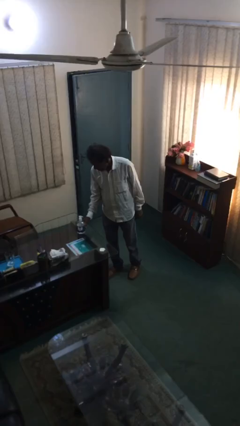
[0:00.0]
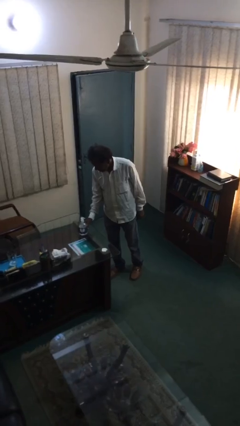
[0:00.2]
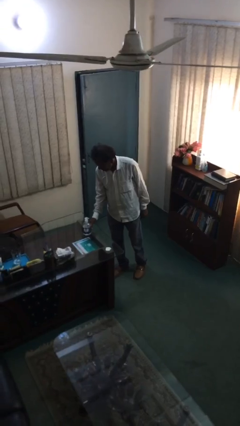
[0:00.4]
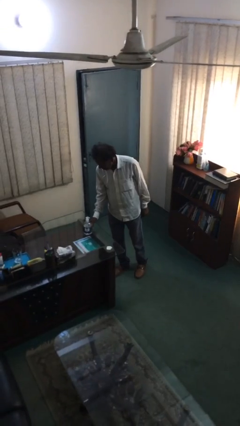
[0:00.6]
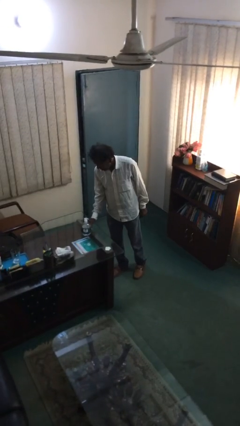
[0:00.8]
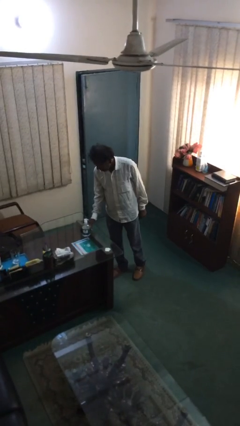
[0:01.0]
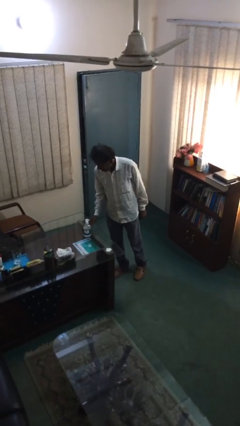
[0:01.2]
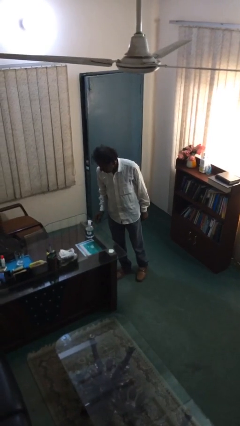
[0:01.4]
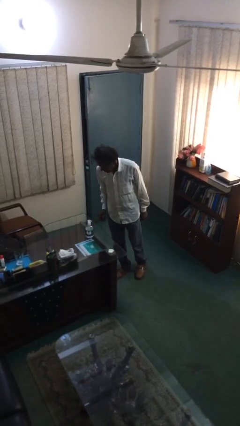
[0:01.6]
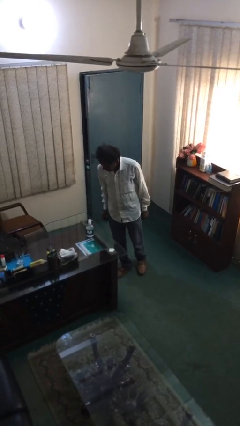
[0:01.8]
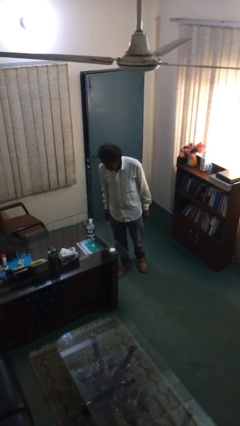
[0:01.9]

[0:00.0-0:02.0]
person puts down object on table

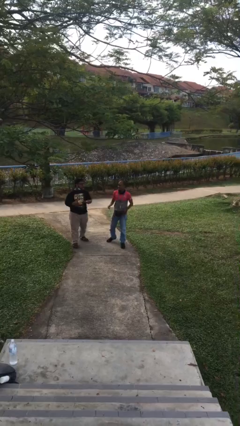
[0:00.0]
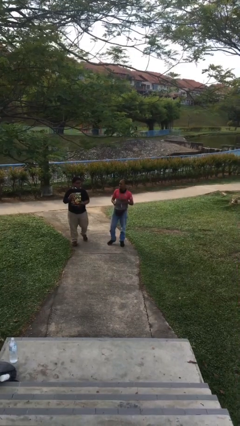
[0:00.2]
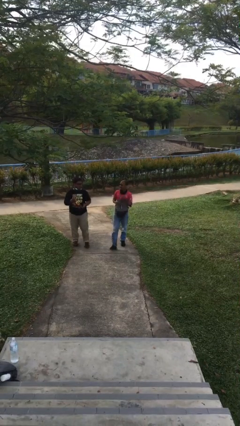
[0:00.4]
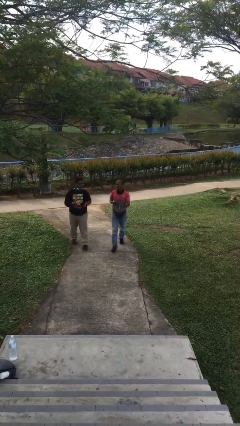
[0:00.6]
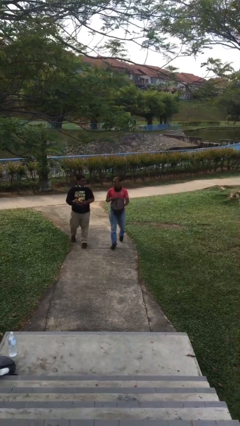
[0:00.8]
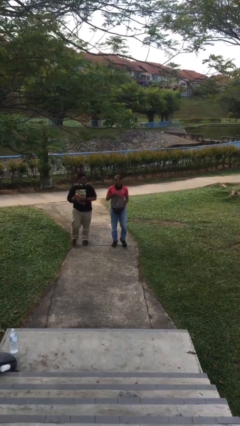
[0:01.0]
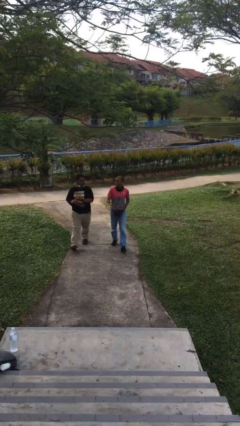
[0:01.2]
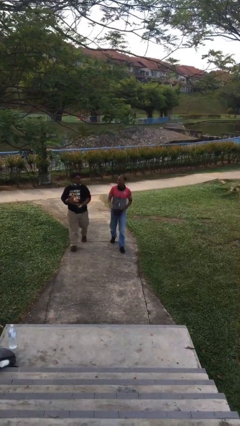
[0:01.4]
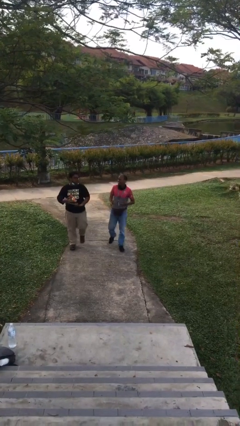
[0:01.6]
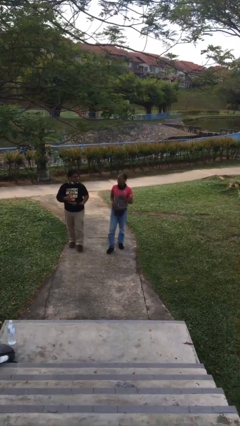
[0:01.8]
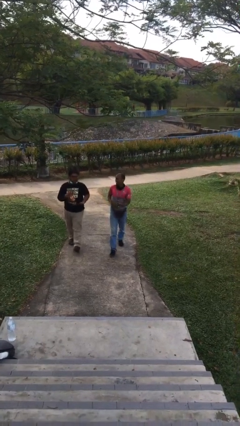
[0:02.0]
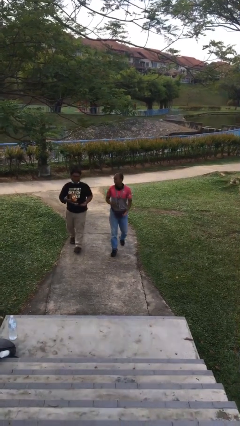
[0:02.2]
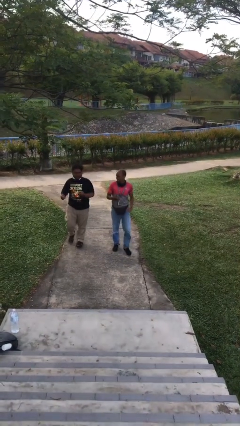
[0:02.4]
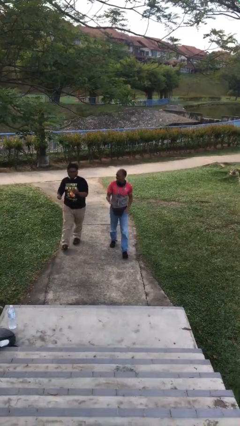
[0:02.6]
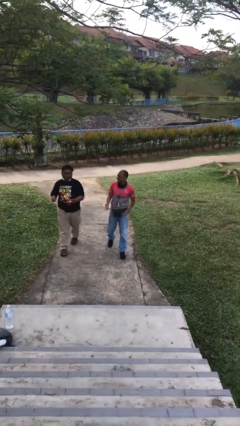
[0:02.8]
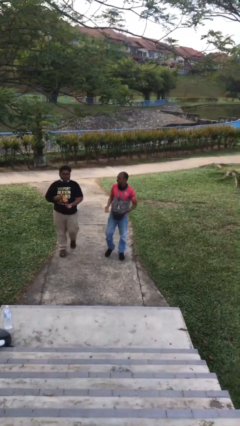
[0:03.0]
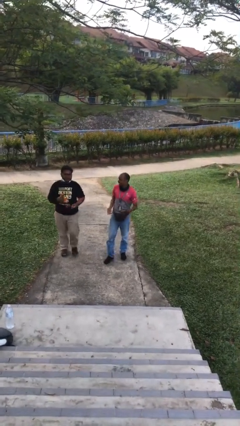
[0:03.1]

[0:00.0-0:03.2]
person talks to person

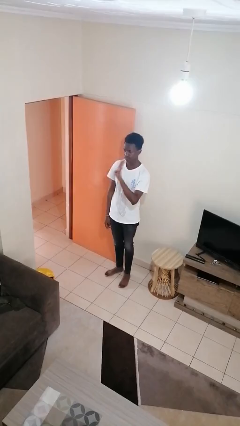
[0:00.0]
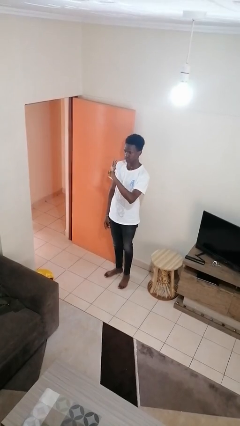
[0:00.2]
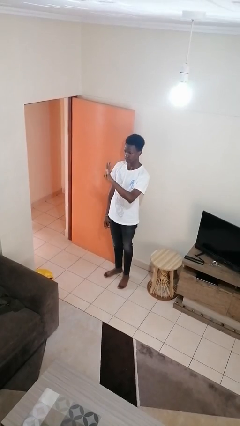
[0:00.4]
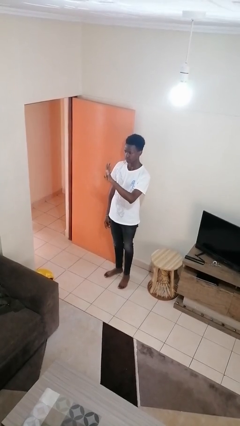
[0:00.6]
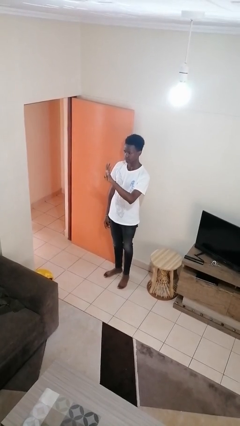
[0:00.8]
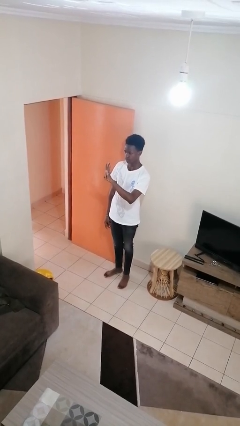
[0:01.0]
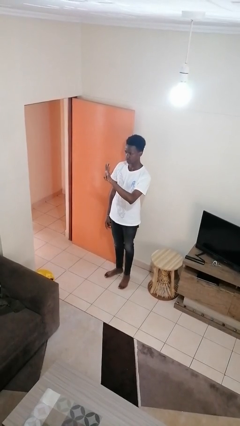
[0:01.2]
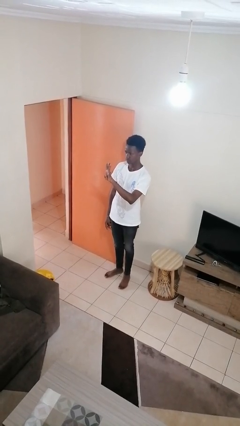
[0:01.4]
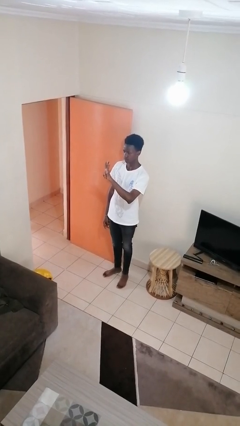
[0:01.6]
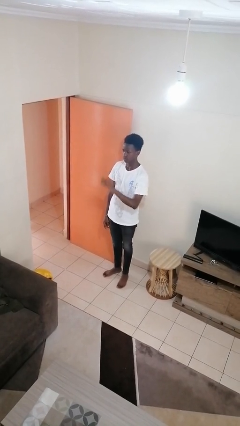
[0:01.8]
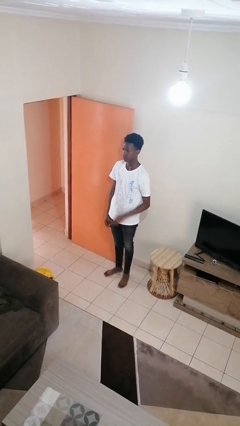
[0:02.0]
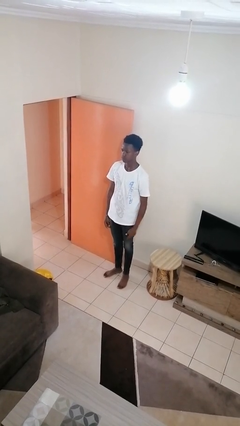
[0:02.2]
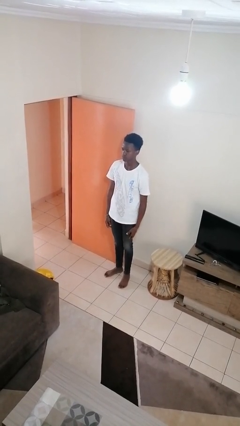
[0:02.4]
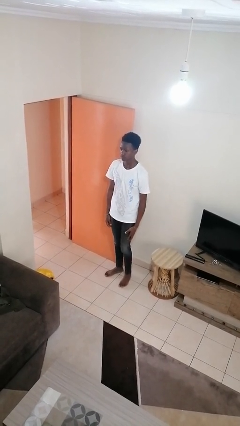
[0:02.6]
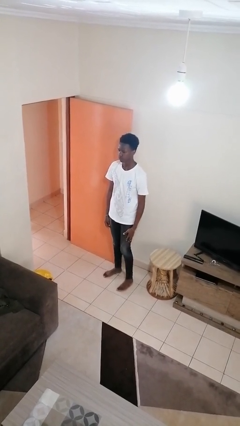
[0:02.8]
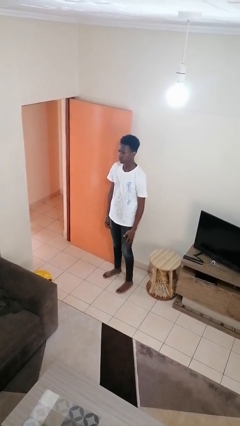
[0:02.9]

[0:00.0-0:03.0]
person gestures number four

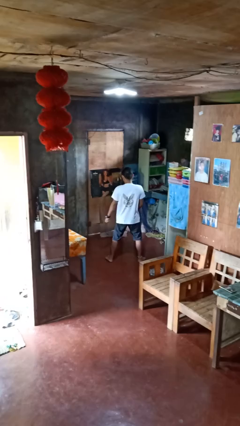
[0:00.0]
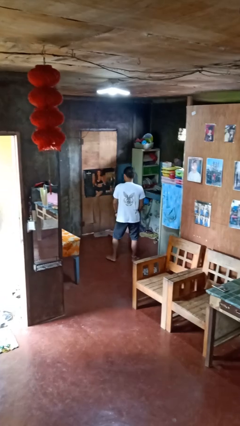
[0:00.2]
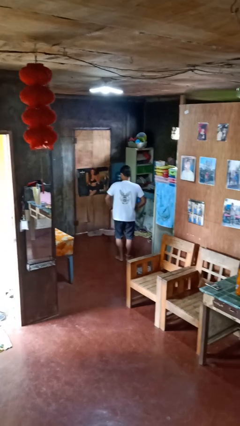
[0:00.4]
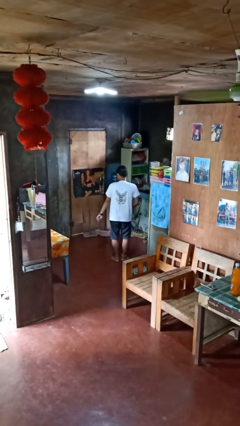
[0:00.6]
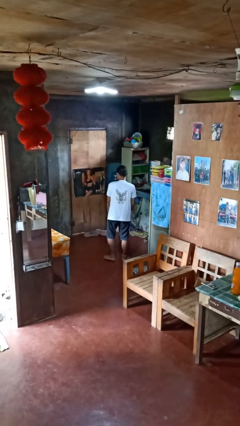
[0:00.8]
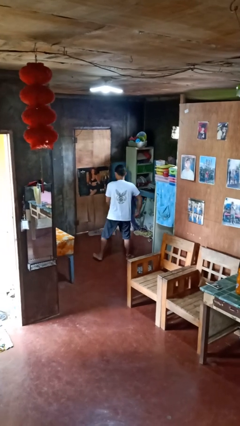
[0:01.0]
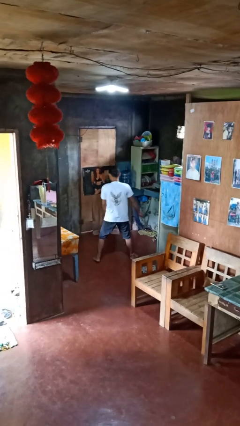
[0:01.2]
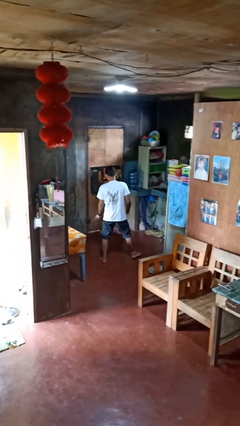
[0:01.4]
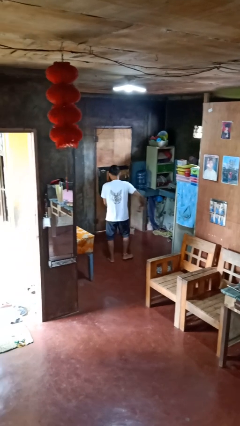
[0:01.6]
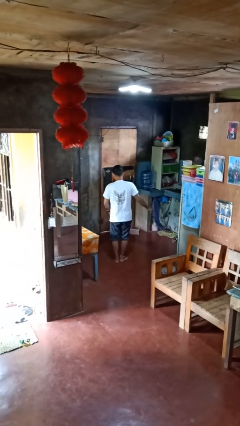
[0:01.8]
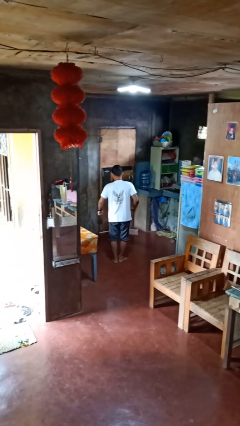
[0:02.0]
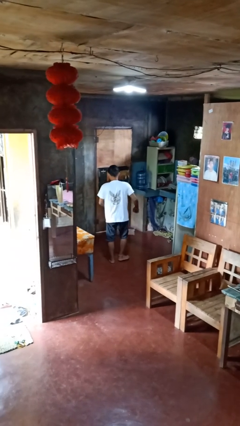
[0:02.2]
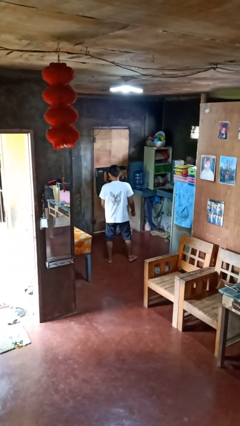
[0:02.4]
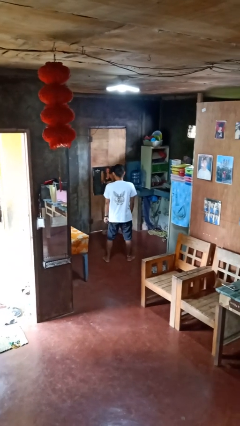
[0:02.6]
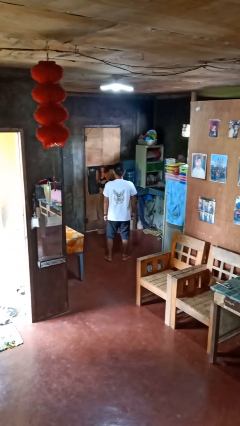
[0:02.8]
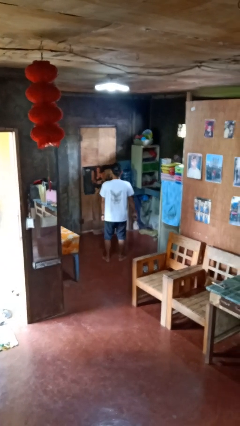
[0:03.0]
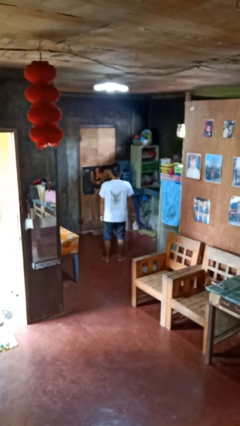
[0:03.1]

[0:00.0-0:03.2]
person dances in place

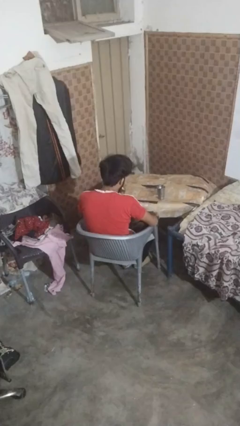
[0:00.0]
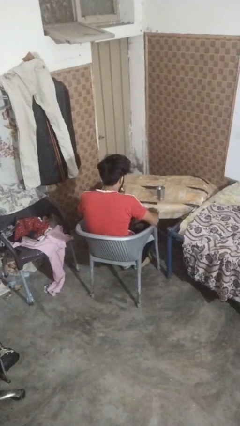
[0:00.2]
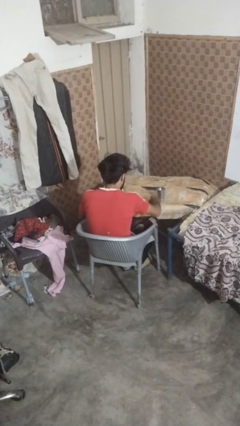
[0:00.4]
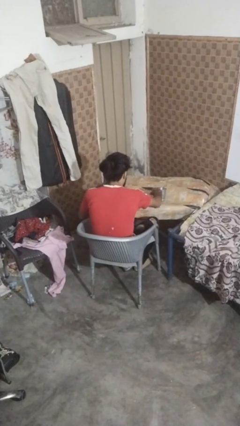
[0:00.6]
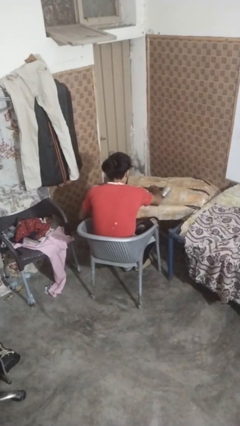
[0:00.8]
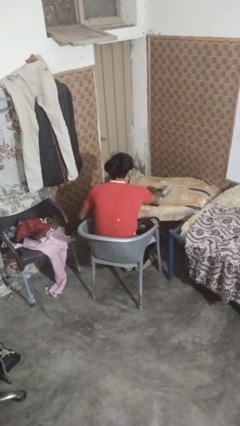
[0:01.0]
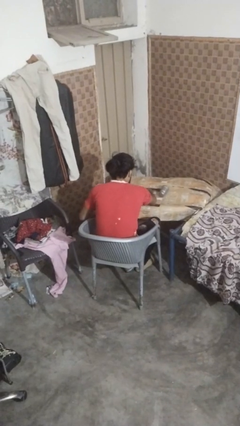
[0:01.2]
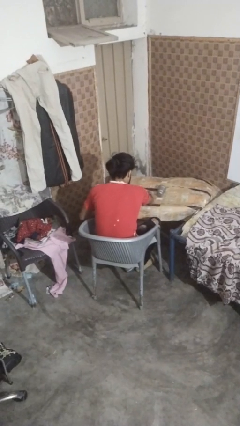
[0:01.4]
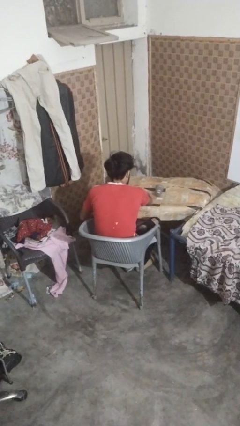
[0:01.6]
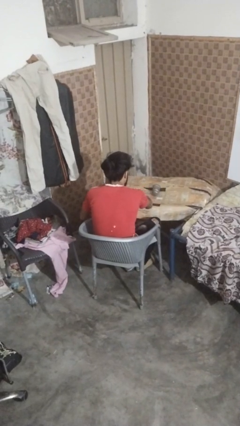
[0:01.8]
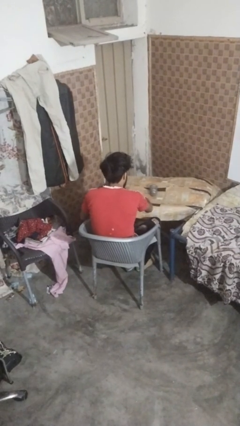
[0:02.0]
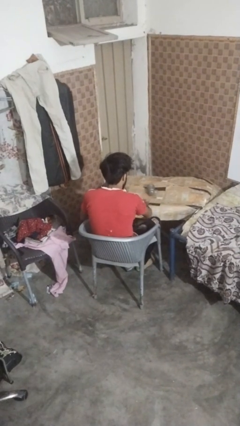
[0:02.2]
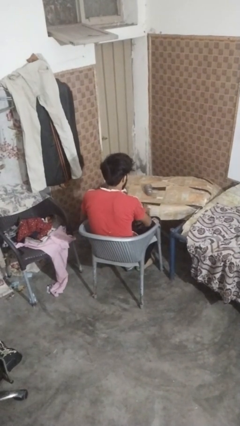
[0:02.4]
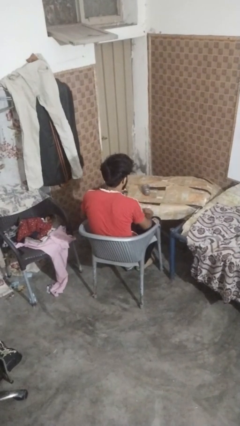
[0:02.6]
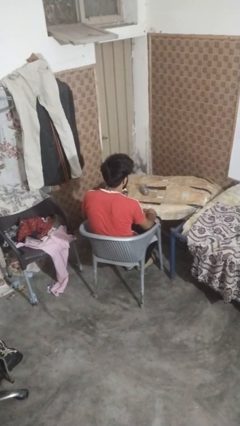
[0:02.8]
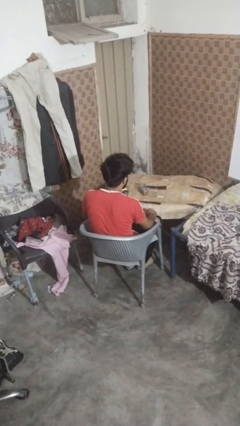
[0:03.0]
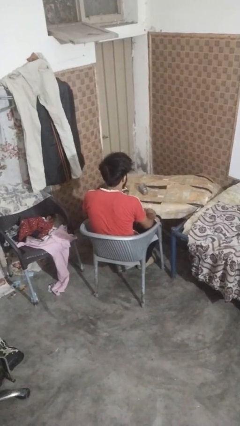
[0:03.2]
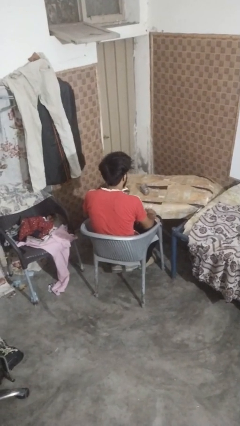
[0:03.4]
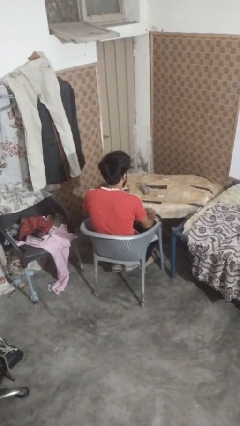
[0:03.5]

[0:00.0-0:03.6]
person knocks over glass

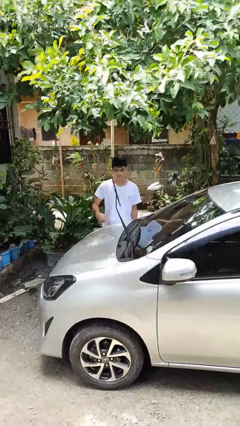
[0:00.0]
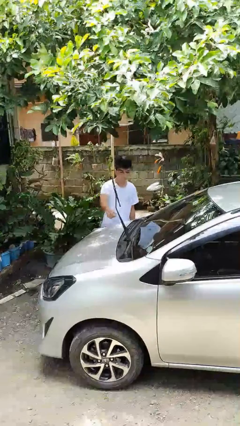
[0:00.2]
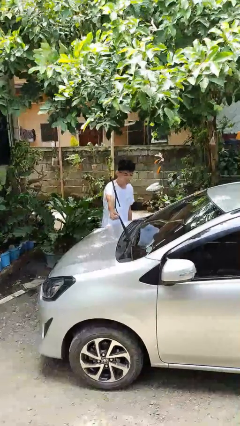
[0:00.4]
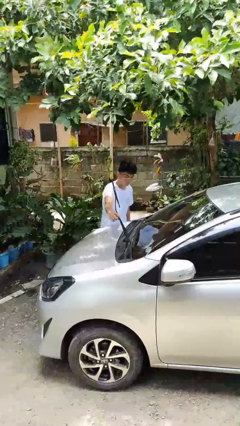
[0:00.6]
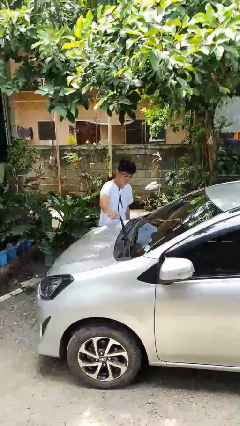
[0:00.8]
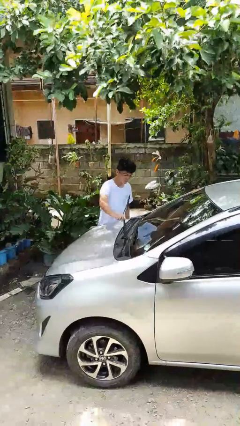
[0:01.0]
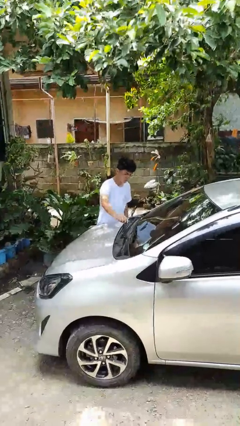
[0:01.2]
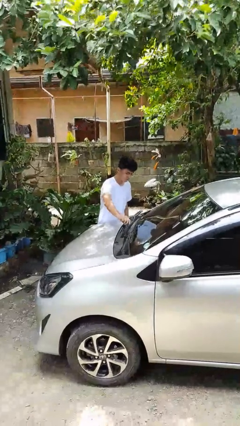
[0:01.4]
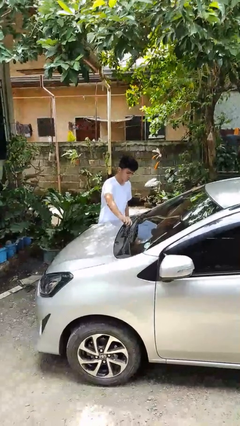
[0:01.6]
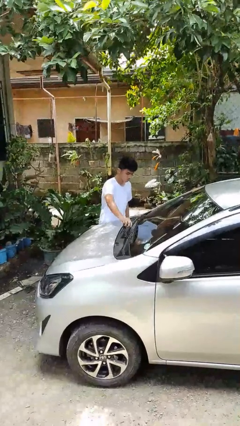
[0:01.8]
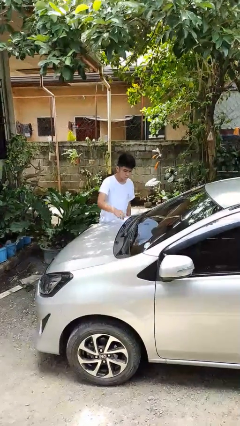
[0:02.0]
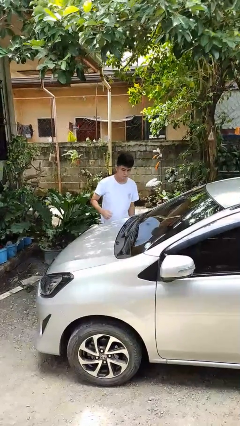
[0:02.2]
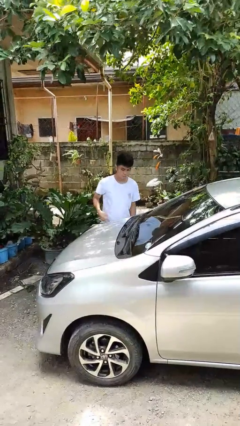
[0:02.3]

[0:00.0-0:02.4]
person flips down car wipers

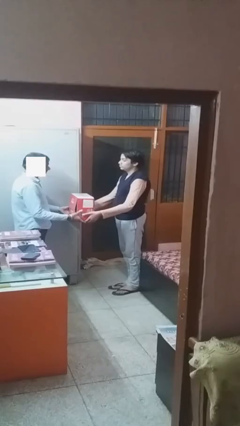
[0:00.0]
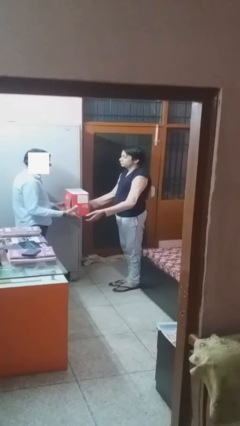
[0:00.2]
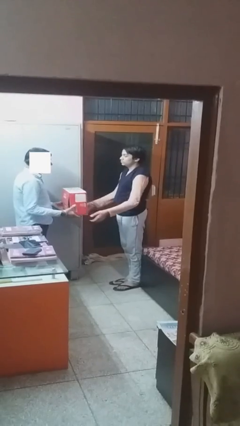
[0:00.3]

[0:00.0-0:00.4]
person transfers object to person
